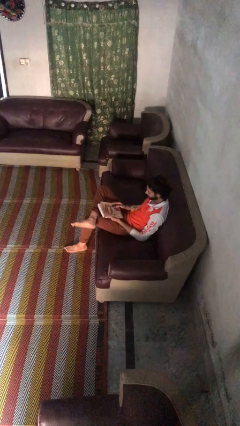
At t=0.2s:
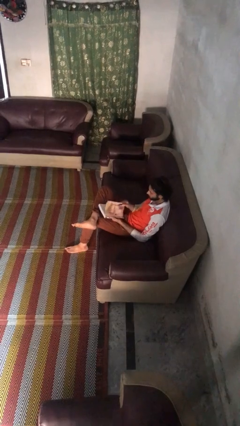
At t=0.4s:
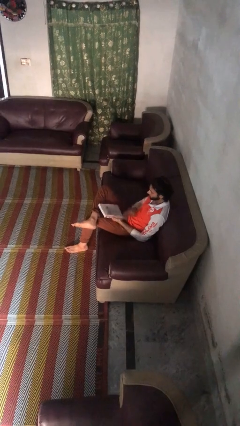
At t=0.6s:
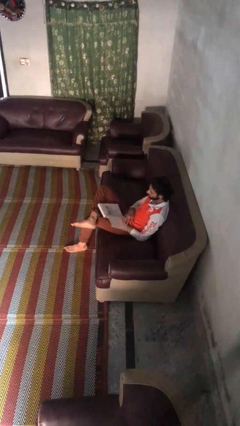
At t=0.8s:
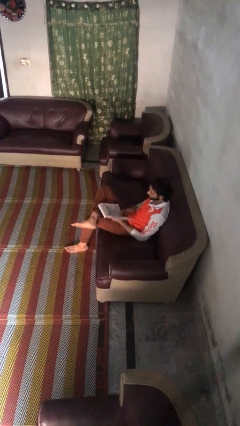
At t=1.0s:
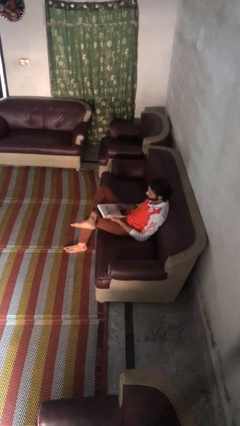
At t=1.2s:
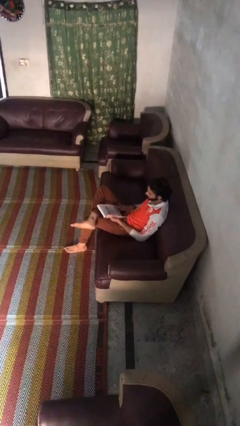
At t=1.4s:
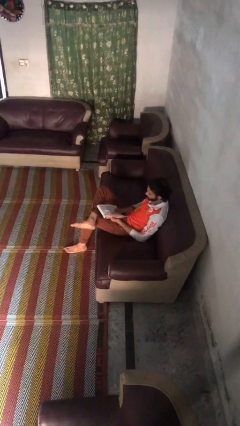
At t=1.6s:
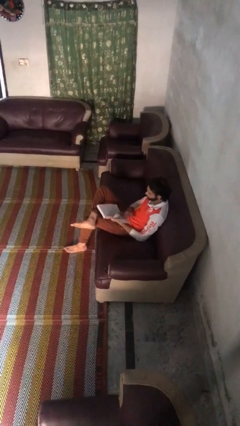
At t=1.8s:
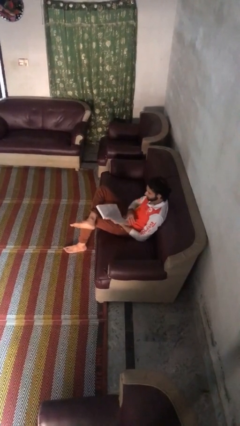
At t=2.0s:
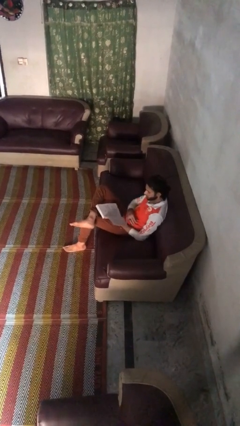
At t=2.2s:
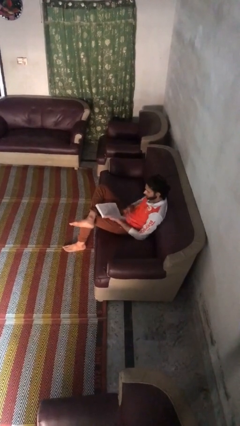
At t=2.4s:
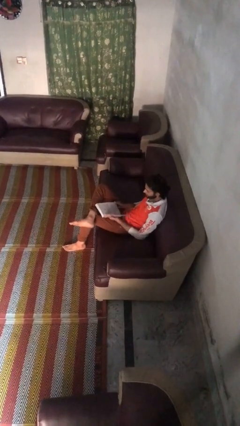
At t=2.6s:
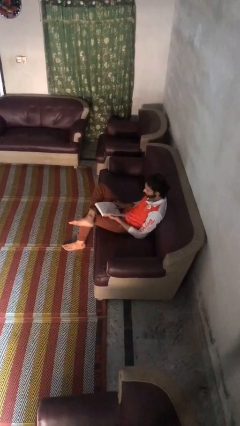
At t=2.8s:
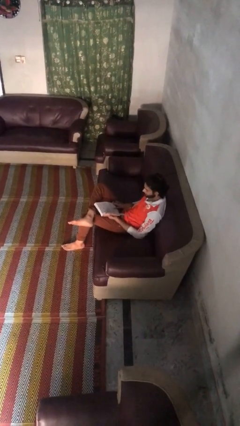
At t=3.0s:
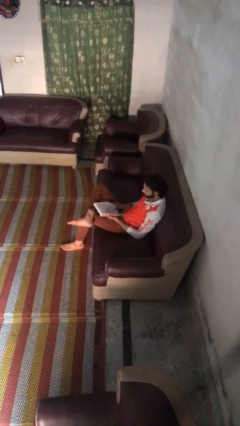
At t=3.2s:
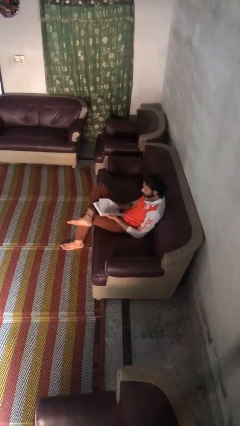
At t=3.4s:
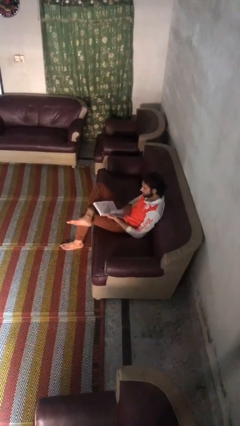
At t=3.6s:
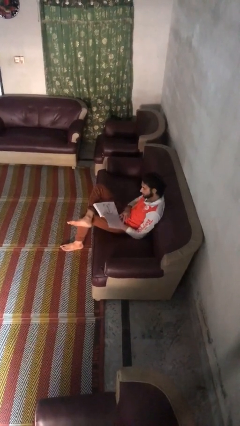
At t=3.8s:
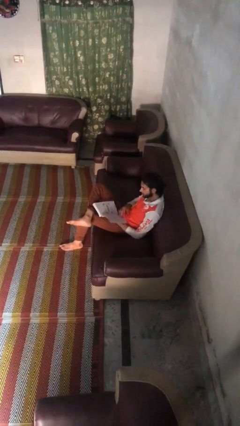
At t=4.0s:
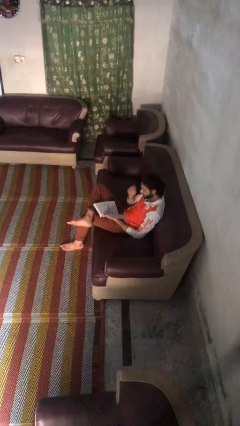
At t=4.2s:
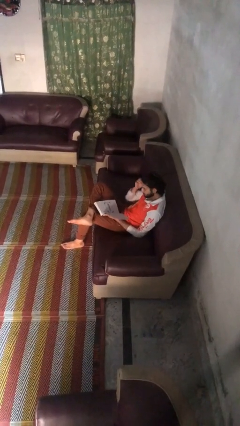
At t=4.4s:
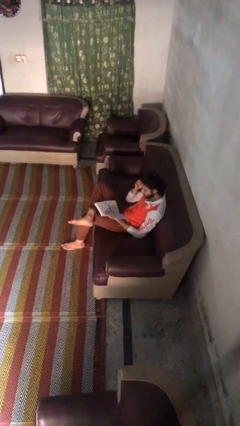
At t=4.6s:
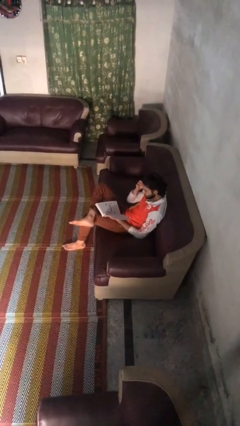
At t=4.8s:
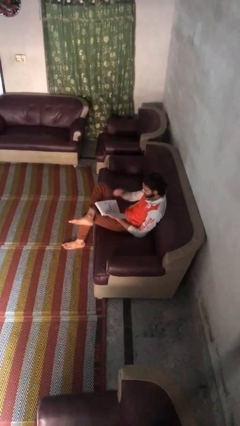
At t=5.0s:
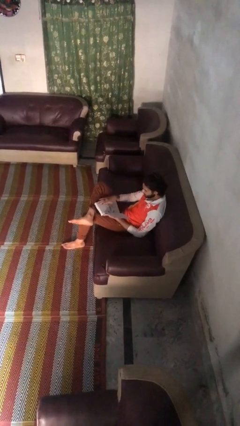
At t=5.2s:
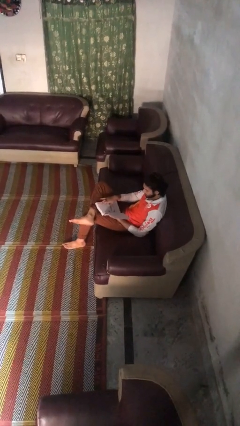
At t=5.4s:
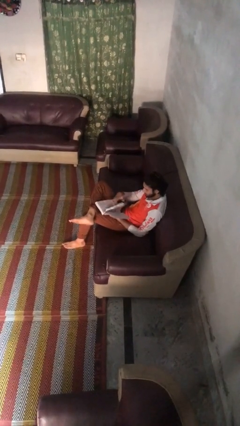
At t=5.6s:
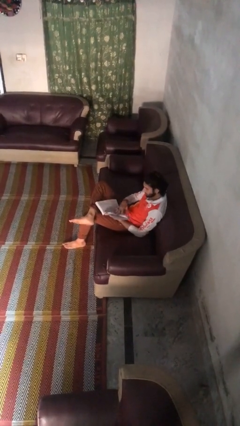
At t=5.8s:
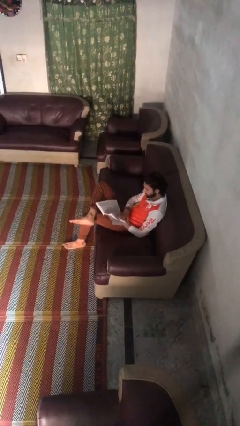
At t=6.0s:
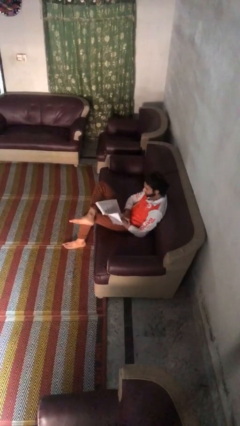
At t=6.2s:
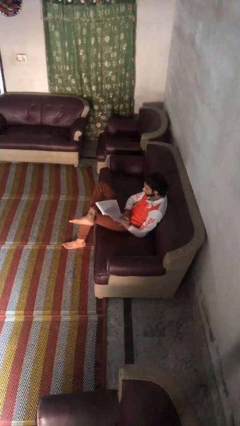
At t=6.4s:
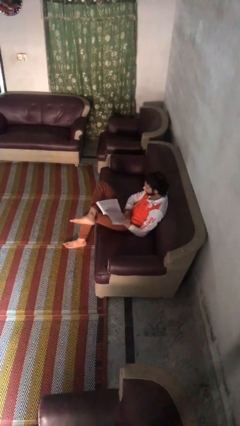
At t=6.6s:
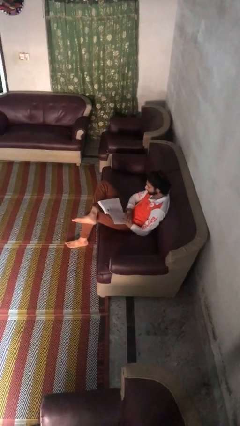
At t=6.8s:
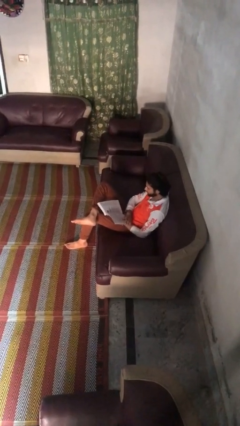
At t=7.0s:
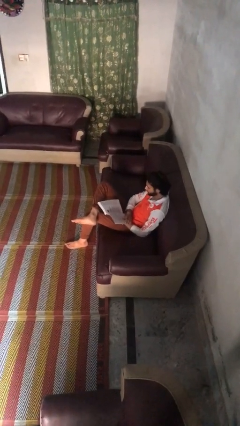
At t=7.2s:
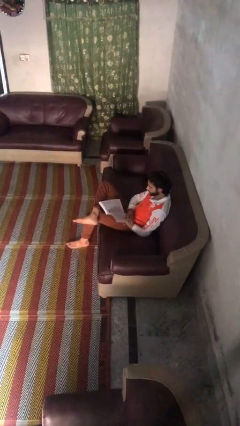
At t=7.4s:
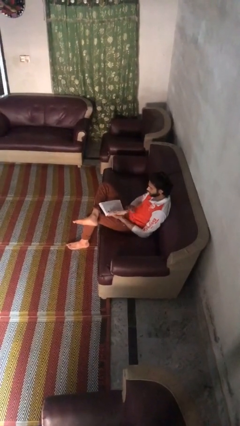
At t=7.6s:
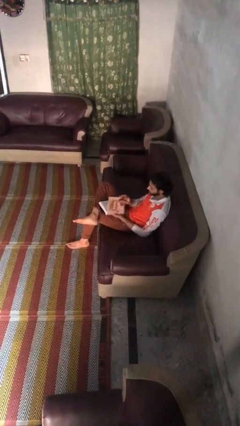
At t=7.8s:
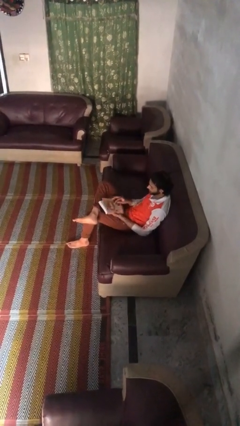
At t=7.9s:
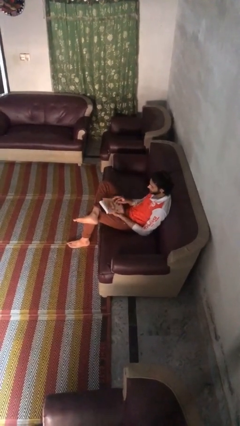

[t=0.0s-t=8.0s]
person reads book

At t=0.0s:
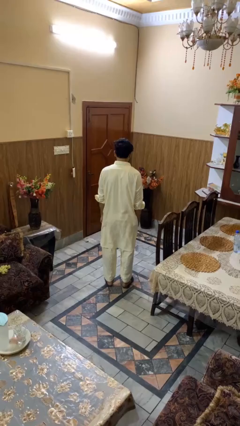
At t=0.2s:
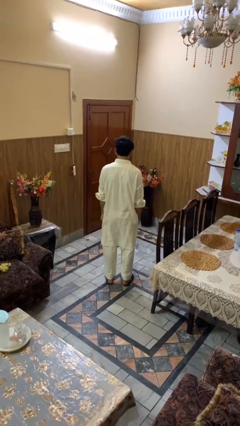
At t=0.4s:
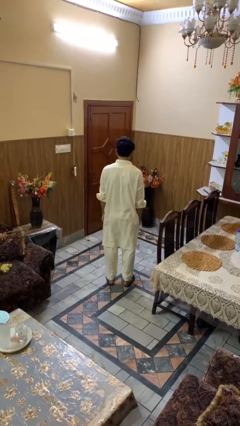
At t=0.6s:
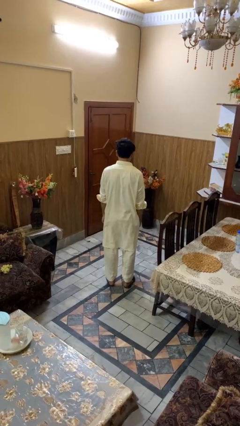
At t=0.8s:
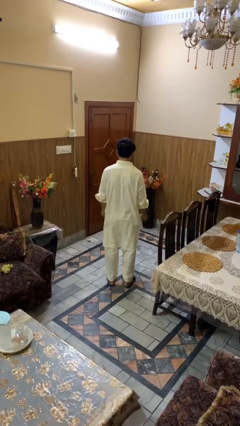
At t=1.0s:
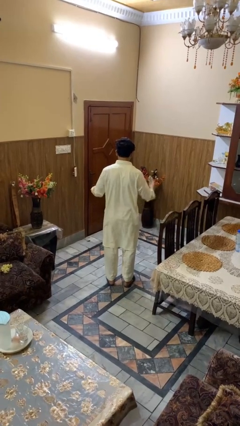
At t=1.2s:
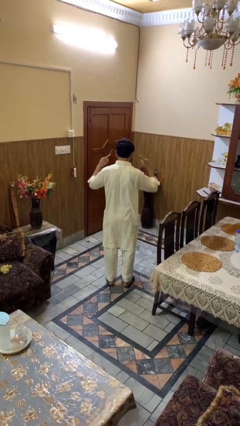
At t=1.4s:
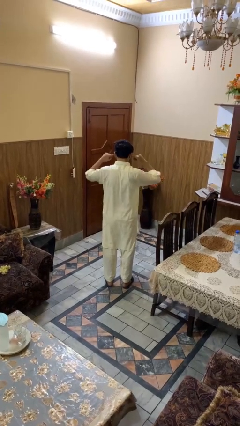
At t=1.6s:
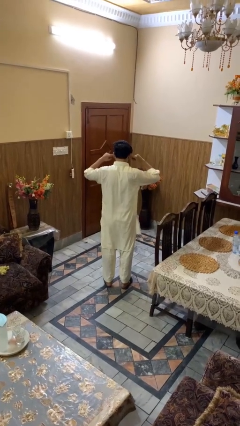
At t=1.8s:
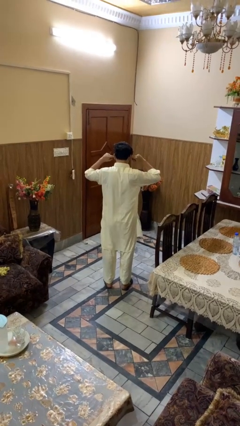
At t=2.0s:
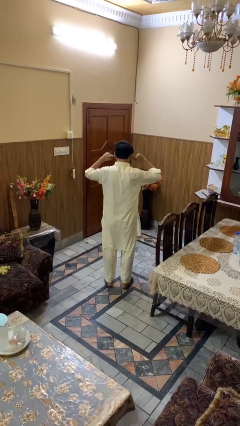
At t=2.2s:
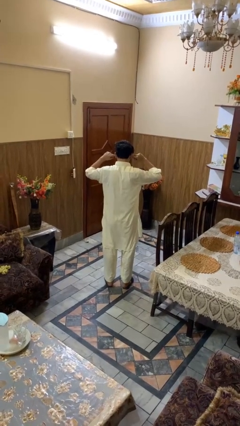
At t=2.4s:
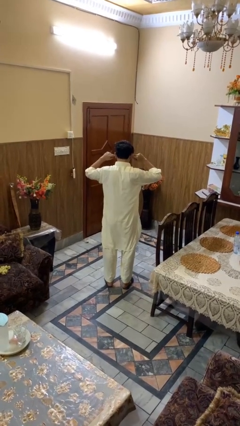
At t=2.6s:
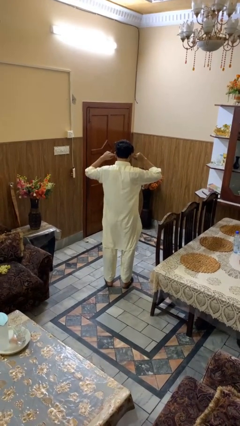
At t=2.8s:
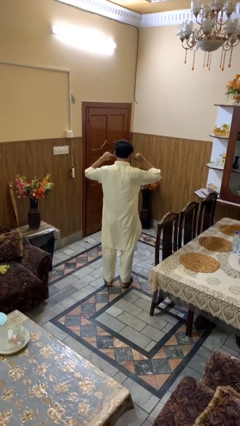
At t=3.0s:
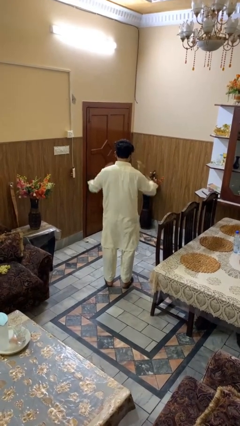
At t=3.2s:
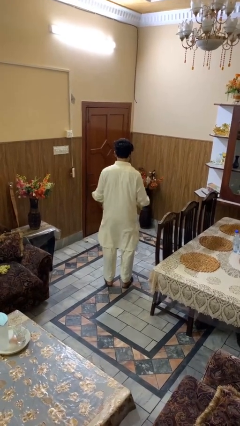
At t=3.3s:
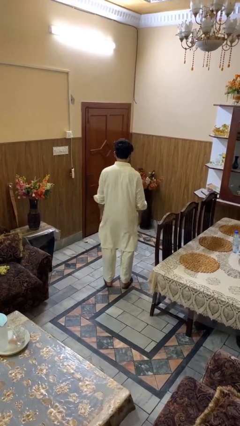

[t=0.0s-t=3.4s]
person puts fingers in ear

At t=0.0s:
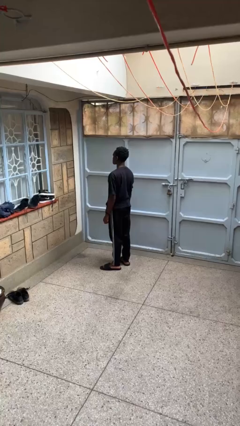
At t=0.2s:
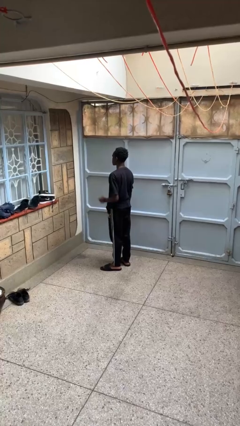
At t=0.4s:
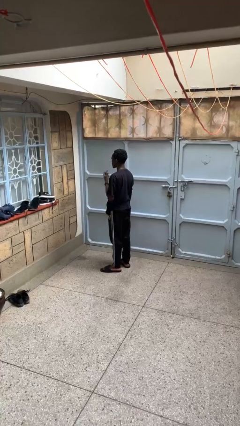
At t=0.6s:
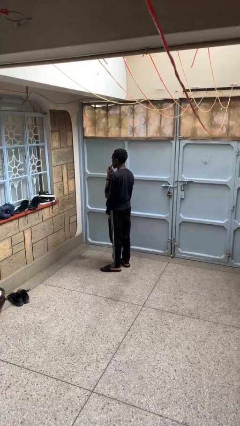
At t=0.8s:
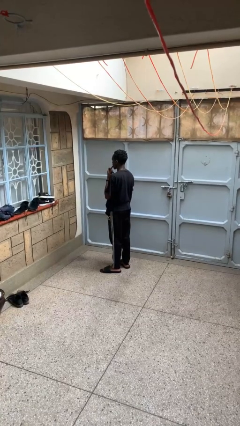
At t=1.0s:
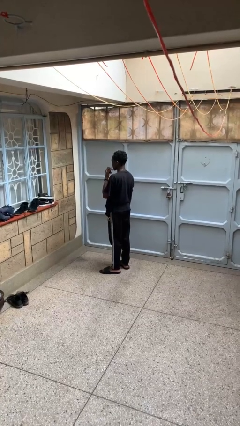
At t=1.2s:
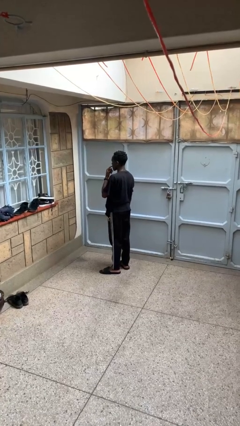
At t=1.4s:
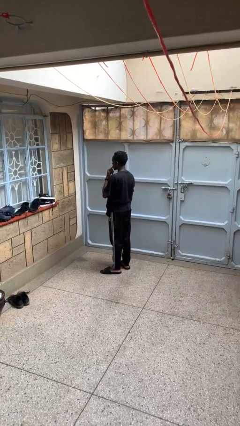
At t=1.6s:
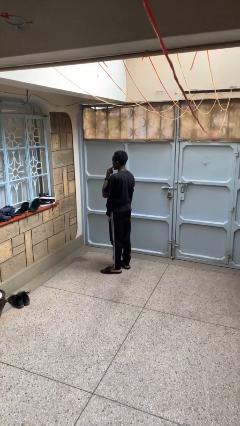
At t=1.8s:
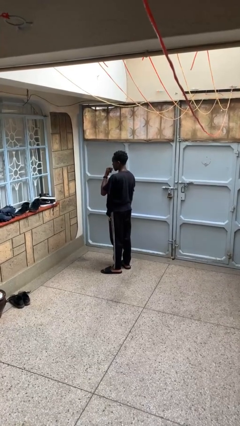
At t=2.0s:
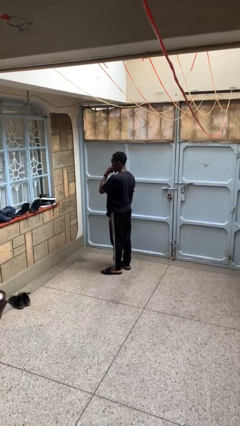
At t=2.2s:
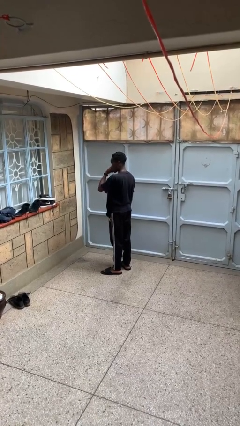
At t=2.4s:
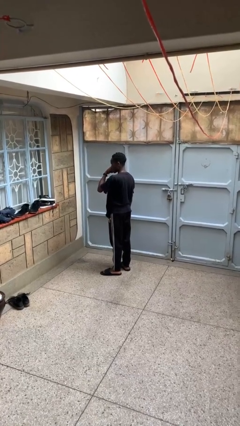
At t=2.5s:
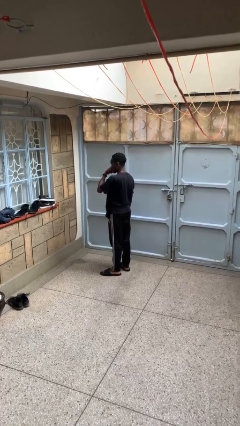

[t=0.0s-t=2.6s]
person licks fingers

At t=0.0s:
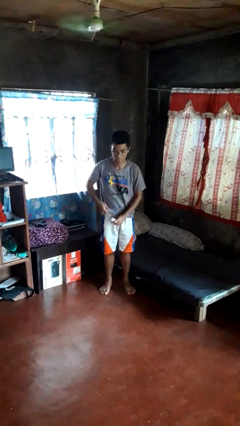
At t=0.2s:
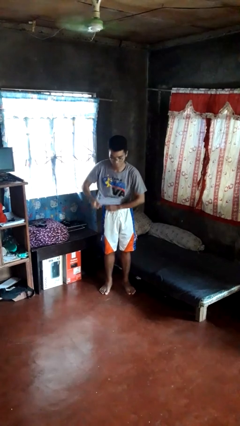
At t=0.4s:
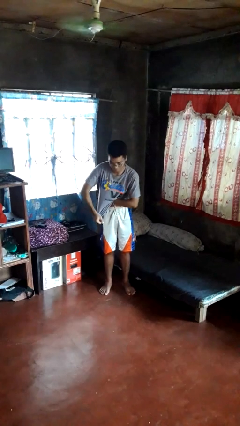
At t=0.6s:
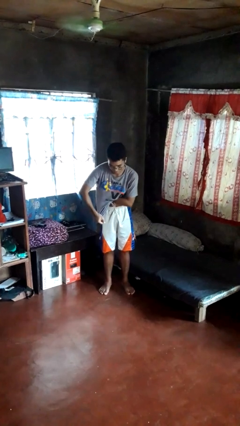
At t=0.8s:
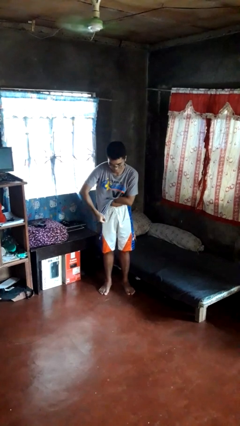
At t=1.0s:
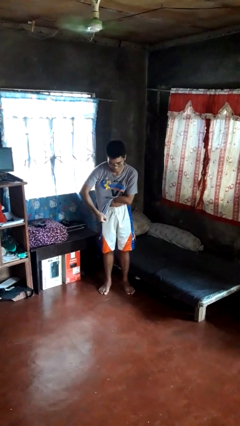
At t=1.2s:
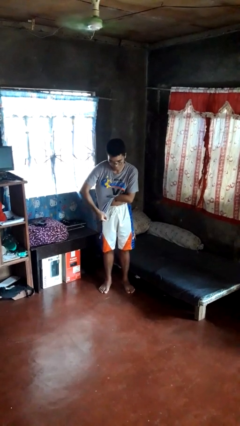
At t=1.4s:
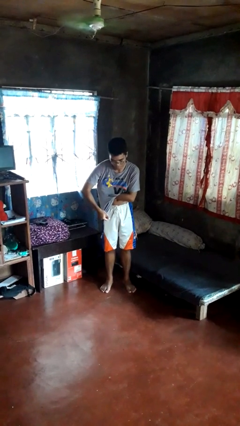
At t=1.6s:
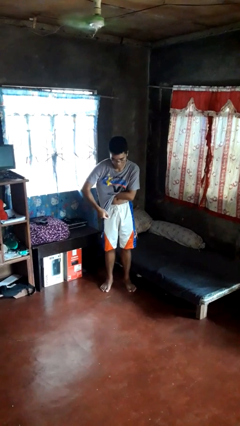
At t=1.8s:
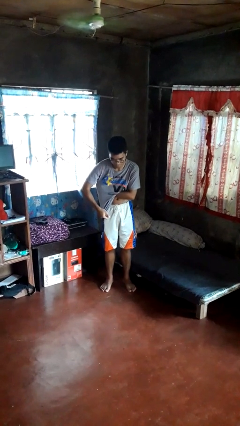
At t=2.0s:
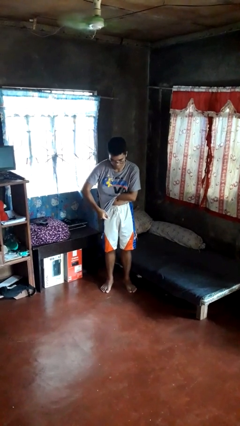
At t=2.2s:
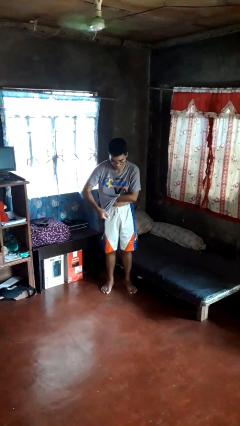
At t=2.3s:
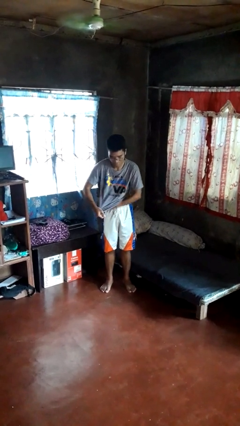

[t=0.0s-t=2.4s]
person applies deodorant

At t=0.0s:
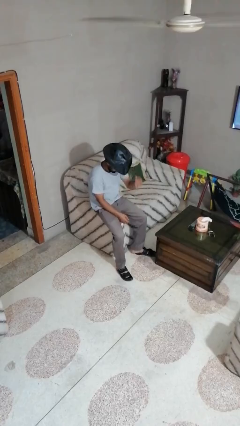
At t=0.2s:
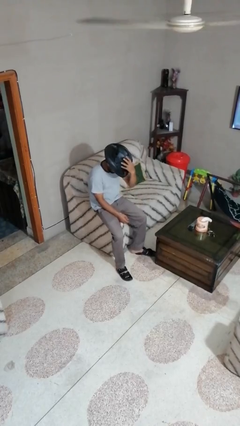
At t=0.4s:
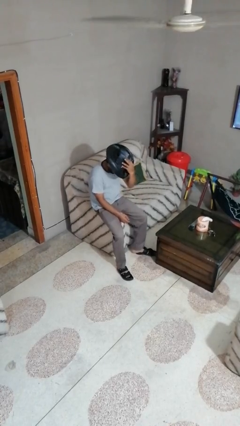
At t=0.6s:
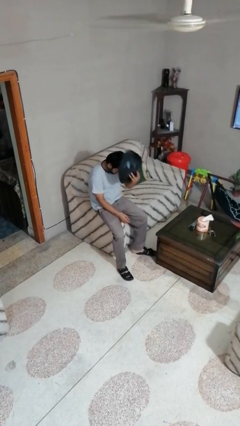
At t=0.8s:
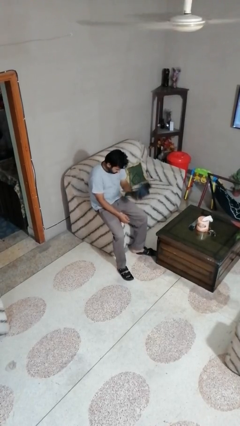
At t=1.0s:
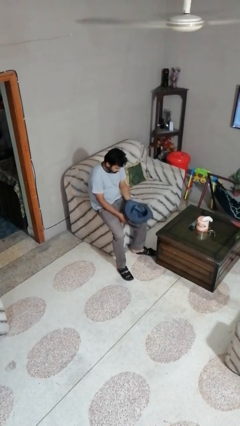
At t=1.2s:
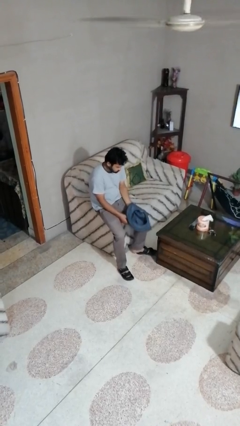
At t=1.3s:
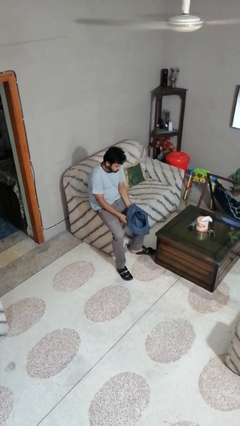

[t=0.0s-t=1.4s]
person takes off hat
